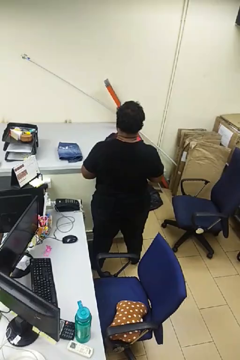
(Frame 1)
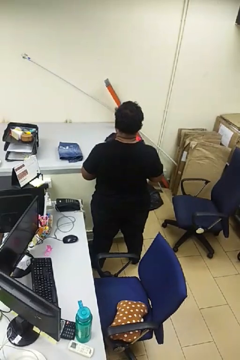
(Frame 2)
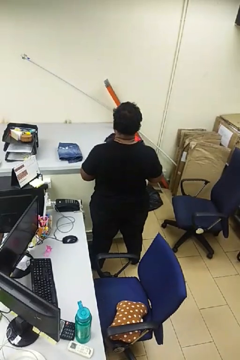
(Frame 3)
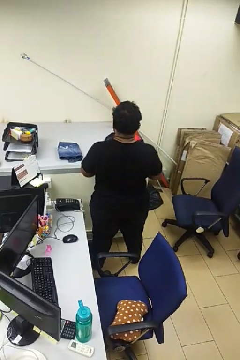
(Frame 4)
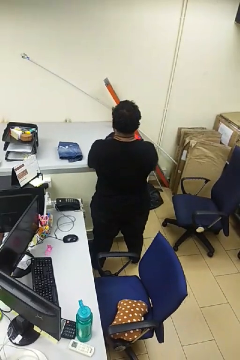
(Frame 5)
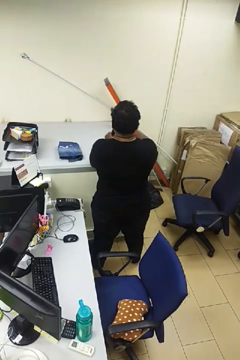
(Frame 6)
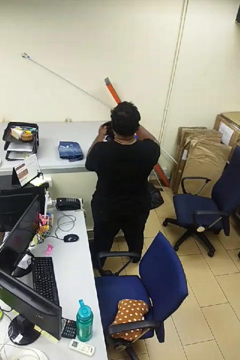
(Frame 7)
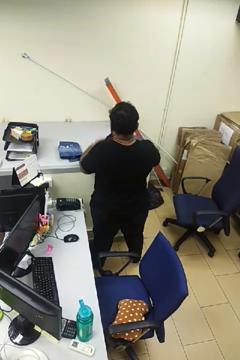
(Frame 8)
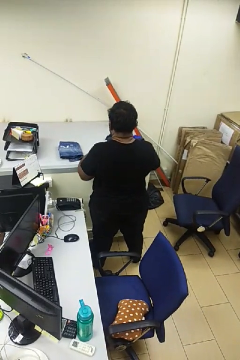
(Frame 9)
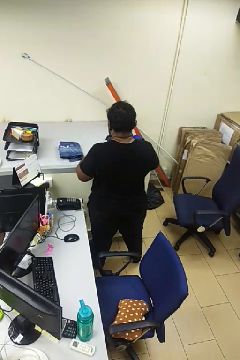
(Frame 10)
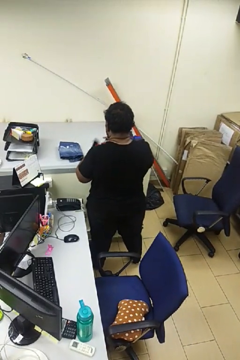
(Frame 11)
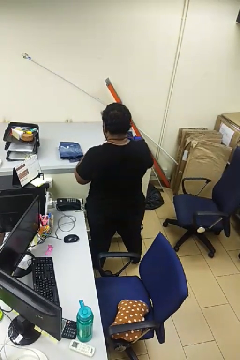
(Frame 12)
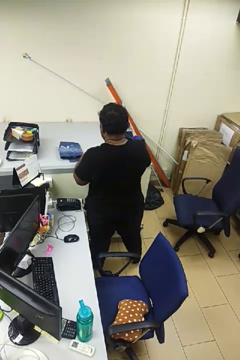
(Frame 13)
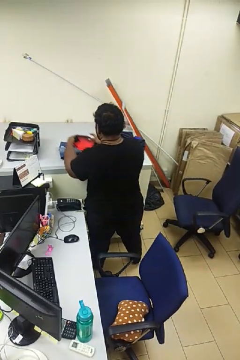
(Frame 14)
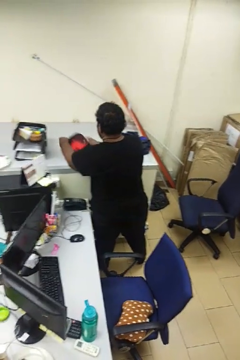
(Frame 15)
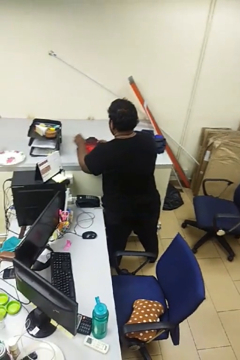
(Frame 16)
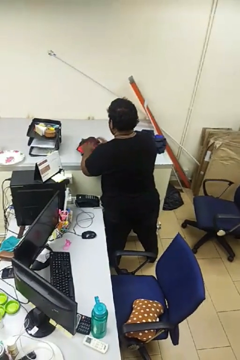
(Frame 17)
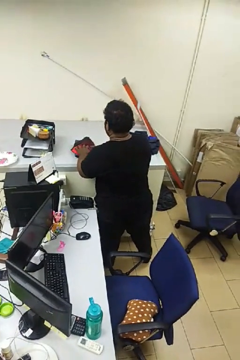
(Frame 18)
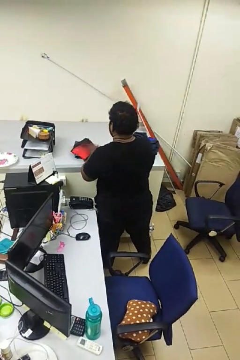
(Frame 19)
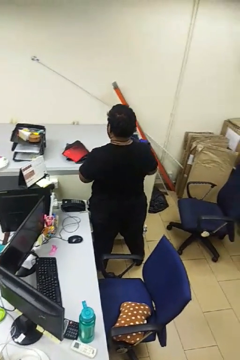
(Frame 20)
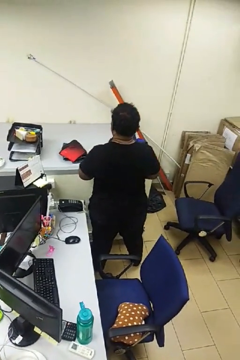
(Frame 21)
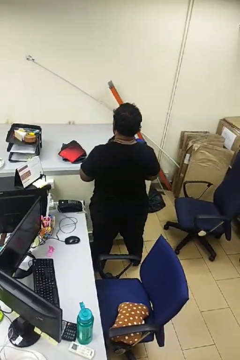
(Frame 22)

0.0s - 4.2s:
person folds shirt

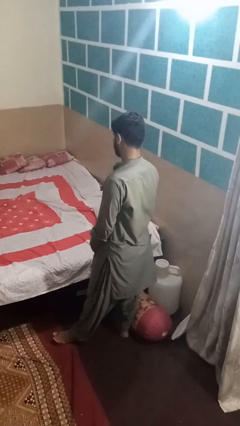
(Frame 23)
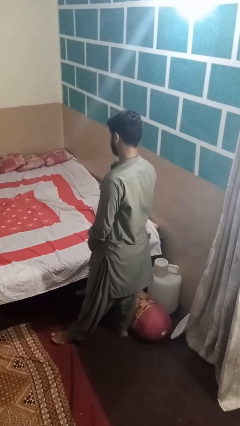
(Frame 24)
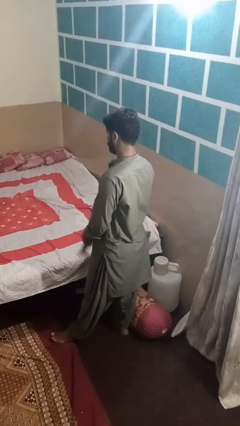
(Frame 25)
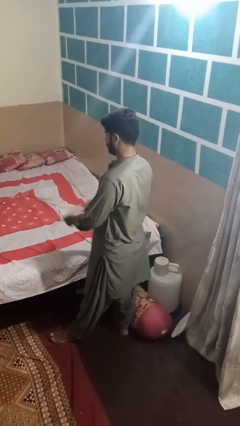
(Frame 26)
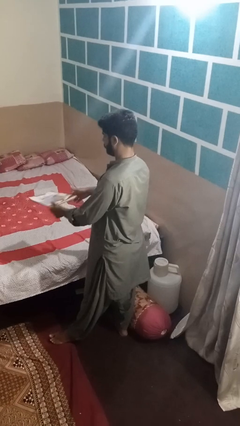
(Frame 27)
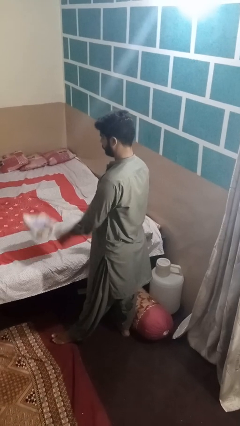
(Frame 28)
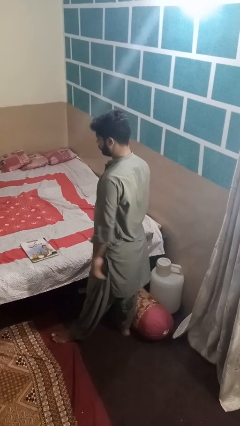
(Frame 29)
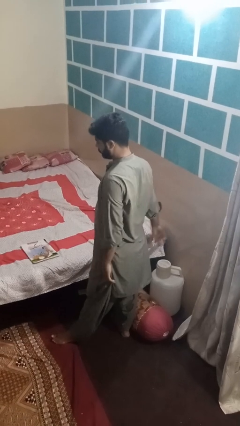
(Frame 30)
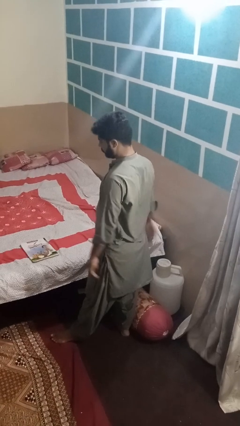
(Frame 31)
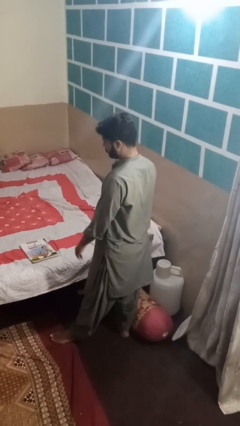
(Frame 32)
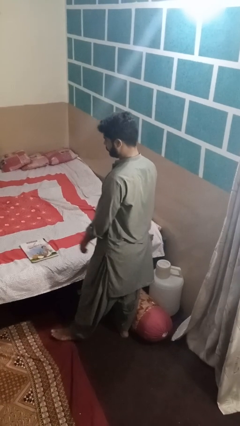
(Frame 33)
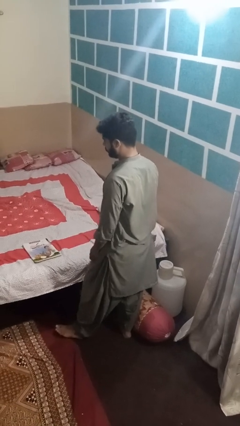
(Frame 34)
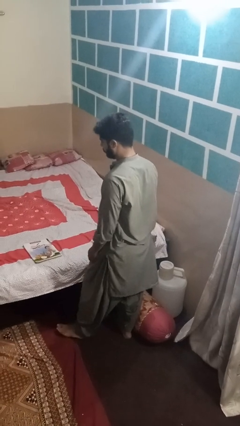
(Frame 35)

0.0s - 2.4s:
person throws object on bed

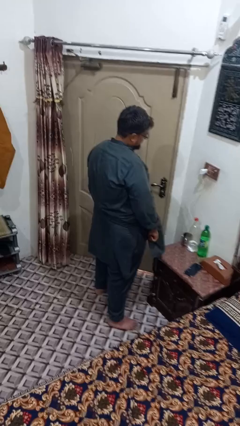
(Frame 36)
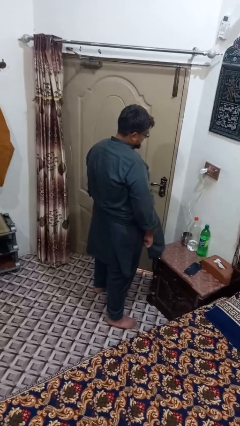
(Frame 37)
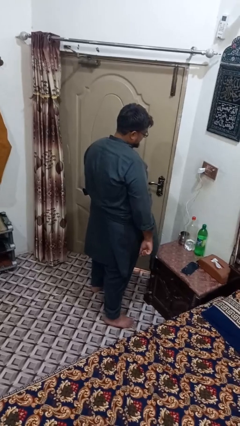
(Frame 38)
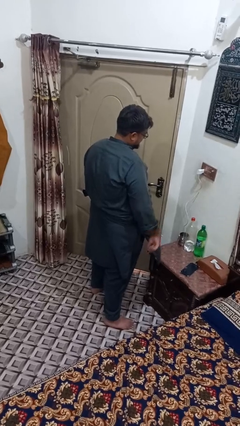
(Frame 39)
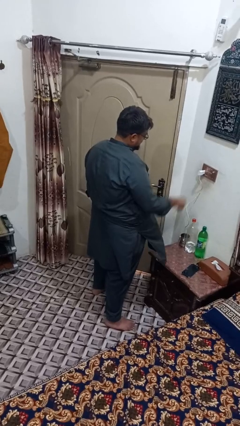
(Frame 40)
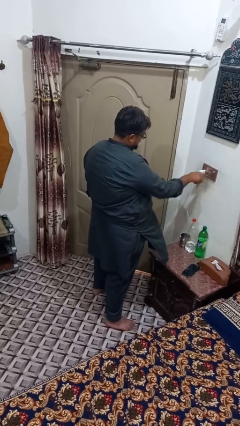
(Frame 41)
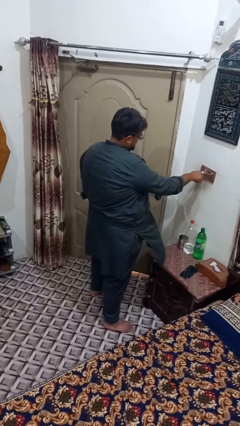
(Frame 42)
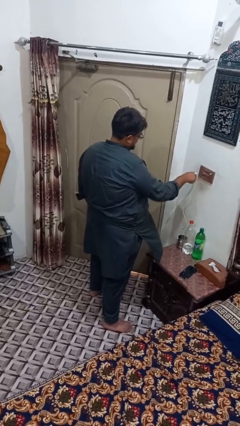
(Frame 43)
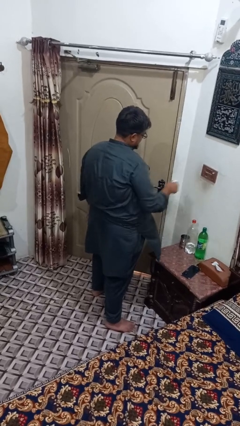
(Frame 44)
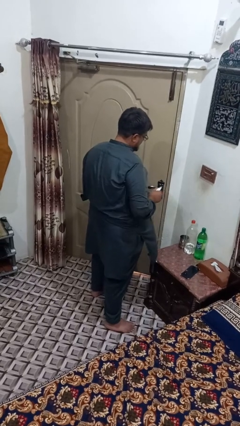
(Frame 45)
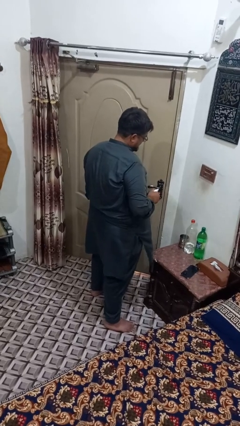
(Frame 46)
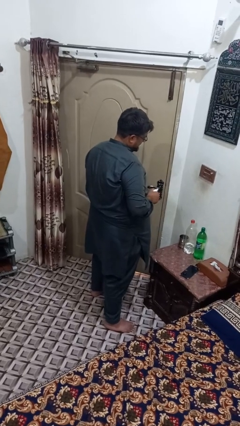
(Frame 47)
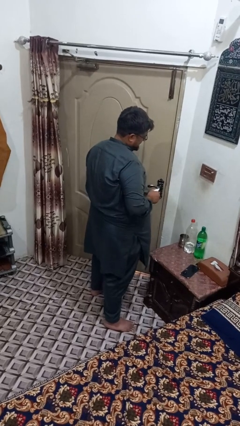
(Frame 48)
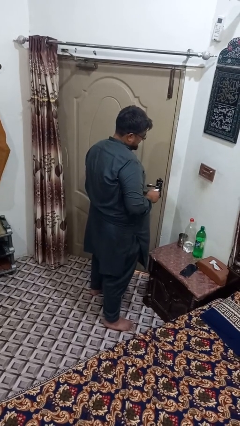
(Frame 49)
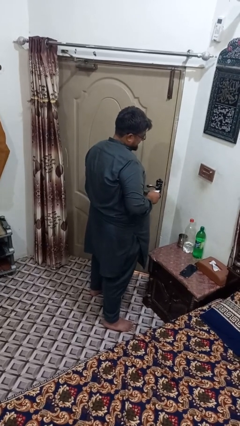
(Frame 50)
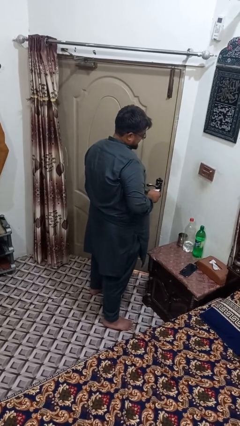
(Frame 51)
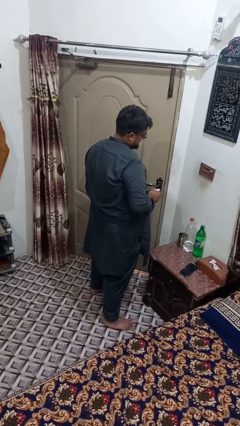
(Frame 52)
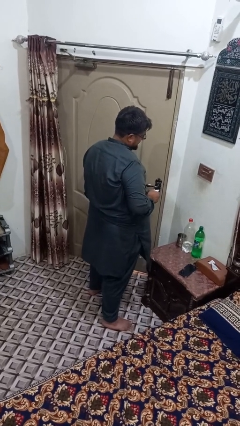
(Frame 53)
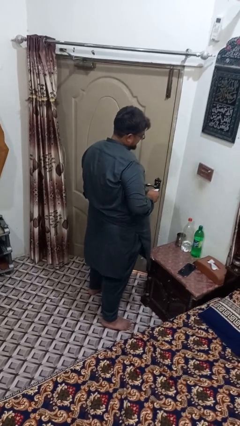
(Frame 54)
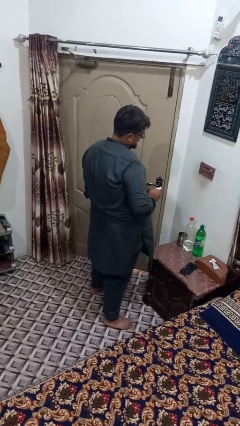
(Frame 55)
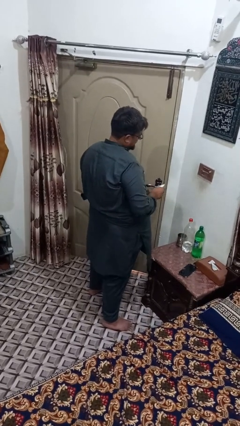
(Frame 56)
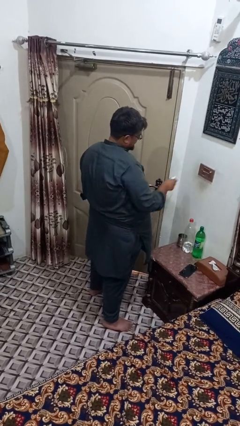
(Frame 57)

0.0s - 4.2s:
person unplugs from electrical socket

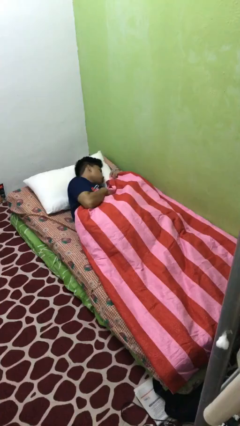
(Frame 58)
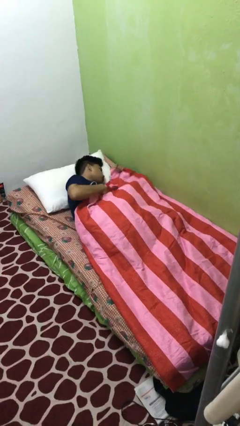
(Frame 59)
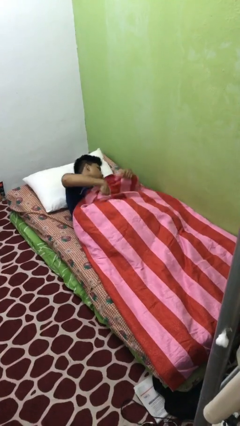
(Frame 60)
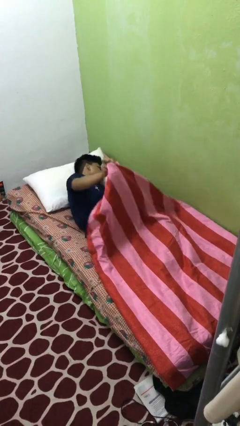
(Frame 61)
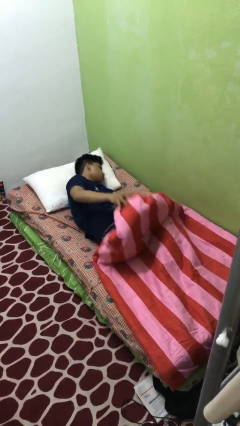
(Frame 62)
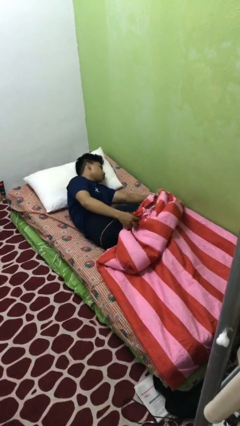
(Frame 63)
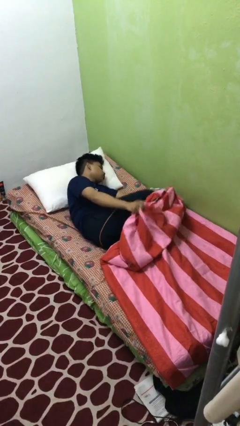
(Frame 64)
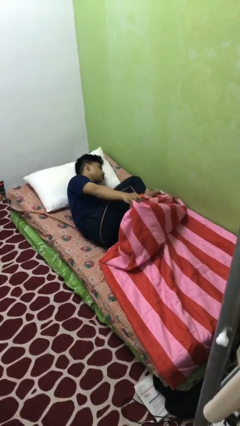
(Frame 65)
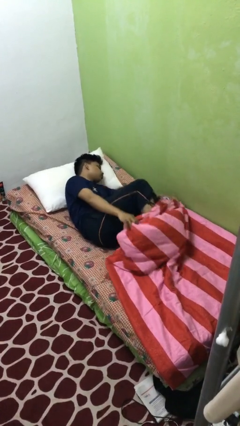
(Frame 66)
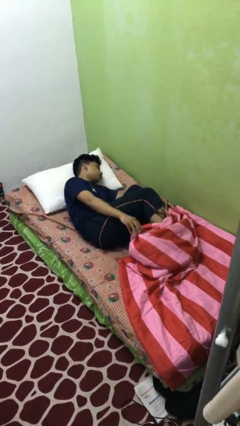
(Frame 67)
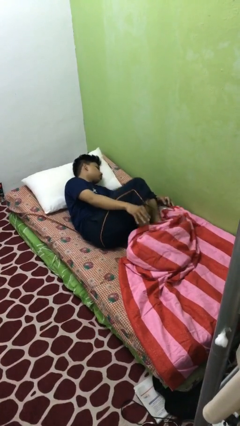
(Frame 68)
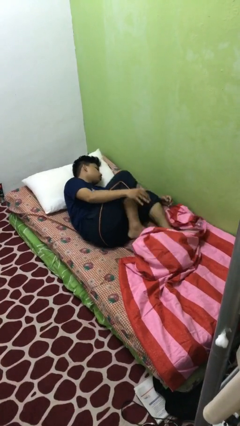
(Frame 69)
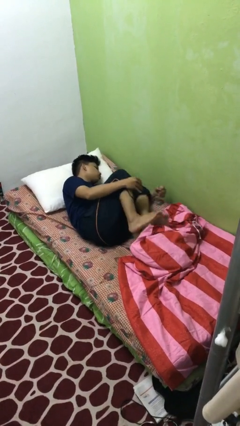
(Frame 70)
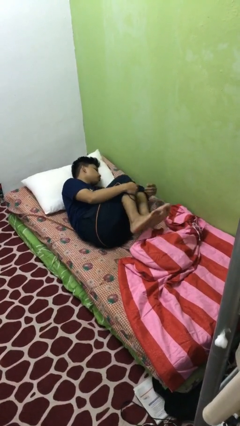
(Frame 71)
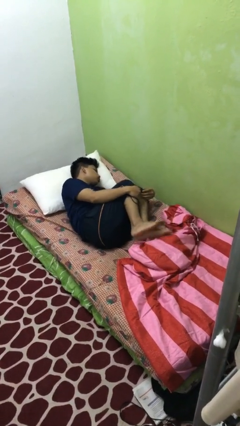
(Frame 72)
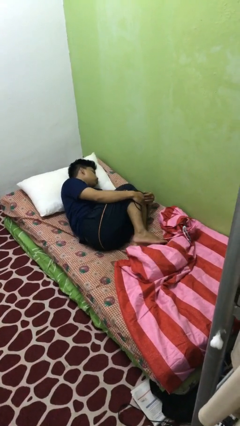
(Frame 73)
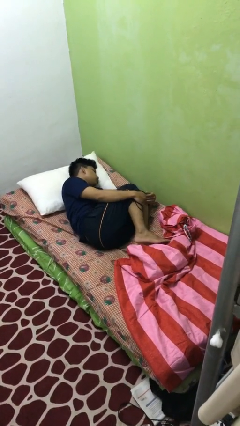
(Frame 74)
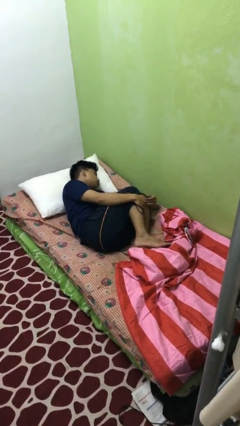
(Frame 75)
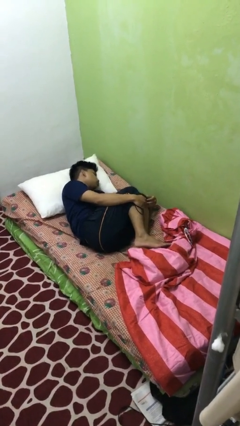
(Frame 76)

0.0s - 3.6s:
person uncovers with bedsheets

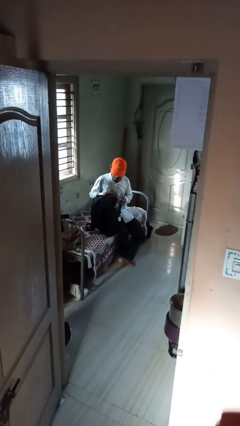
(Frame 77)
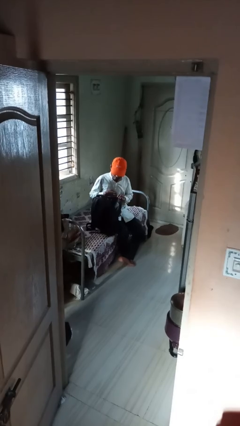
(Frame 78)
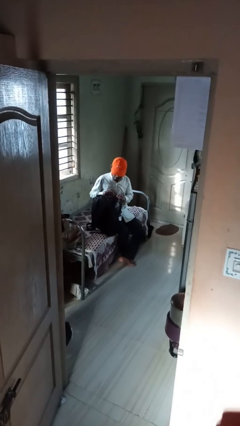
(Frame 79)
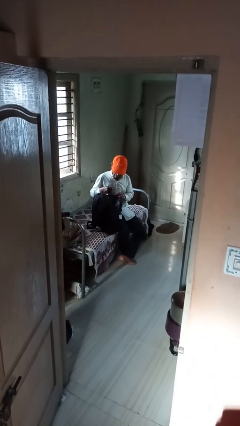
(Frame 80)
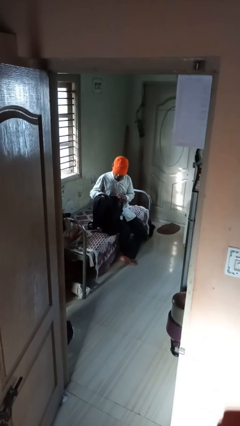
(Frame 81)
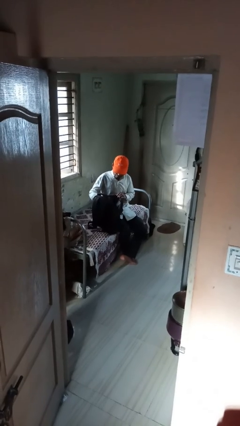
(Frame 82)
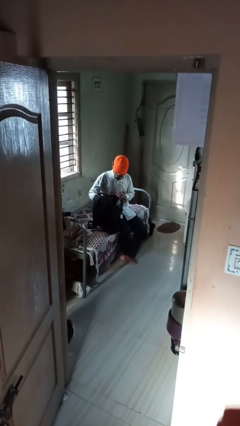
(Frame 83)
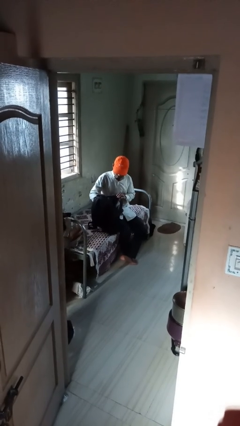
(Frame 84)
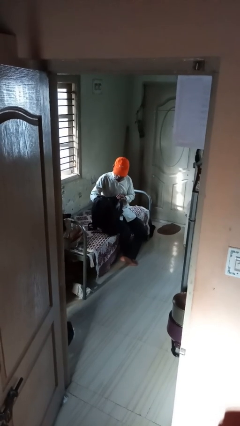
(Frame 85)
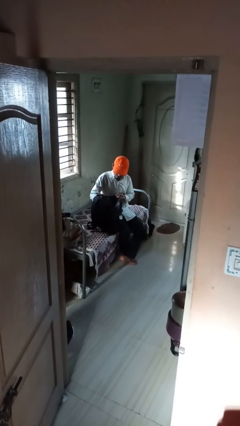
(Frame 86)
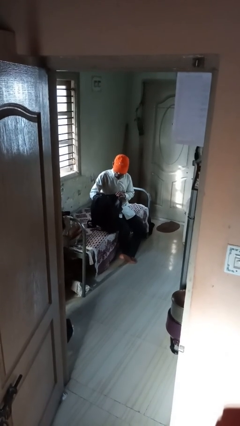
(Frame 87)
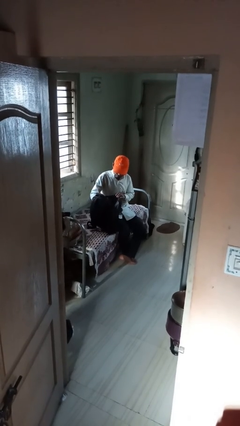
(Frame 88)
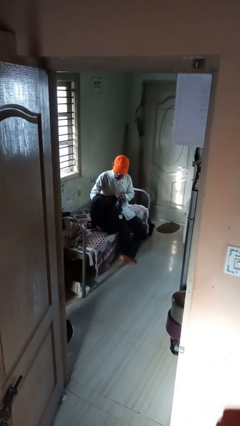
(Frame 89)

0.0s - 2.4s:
person searches in backpack

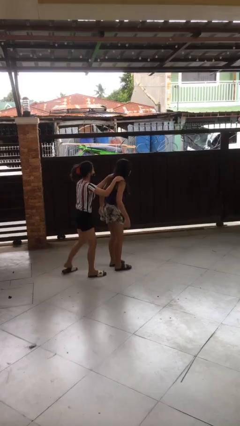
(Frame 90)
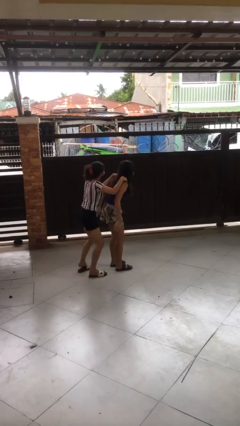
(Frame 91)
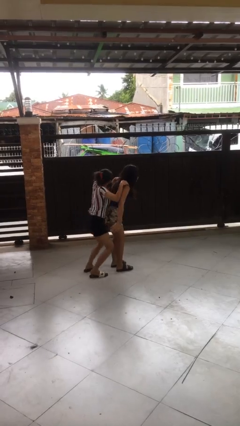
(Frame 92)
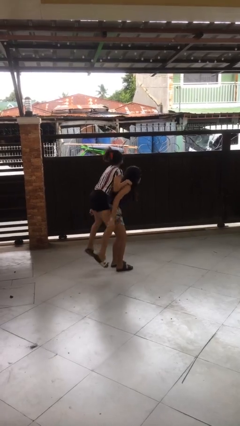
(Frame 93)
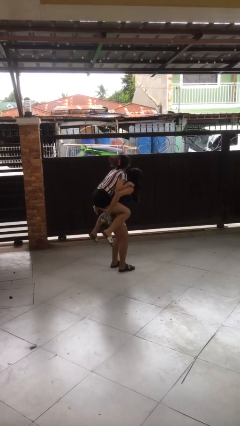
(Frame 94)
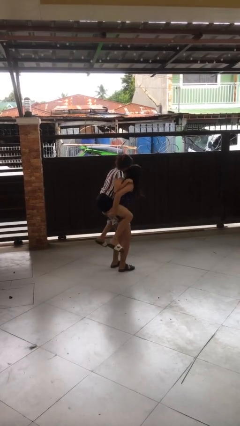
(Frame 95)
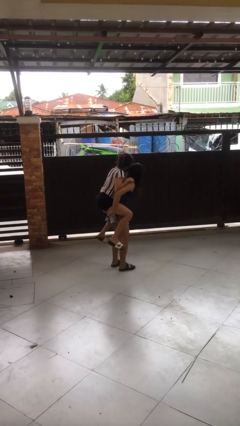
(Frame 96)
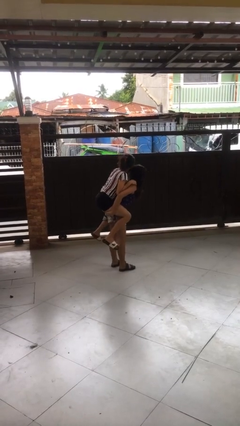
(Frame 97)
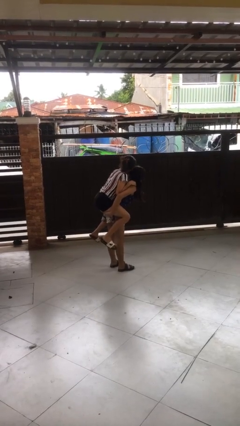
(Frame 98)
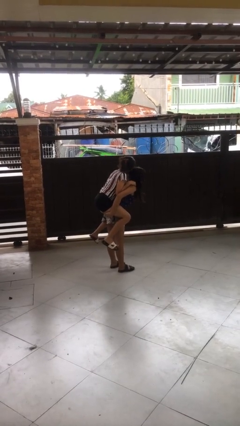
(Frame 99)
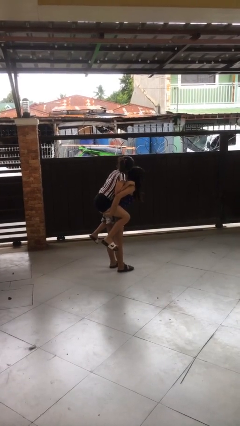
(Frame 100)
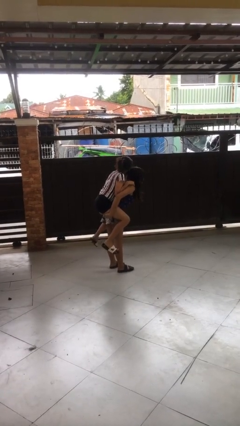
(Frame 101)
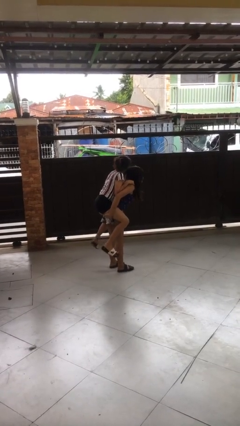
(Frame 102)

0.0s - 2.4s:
person carries person over shoulder
